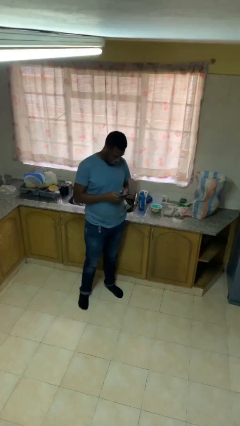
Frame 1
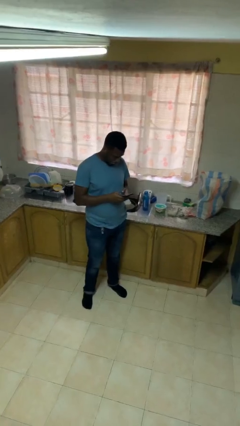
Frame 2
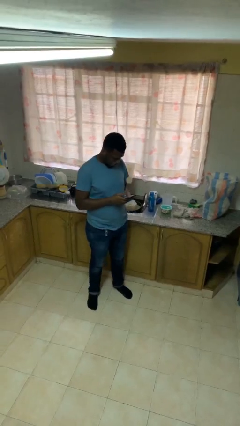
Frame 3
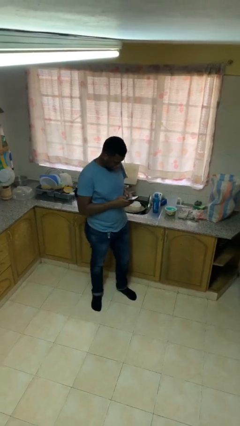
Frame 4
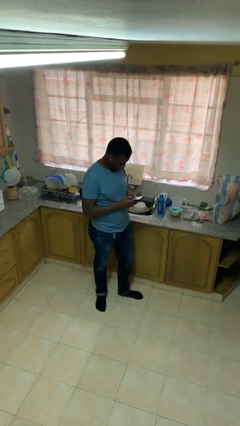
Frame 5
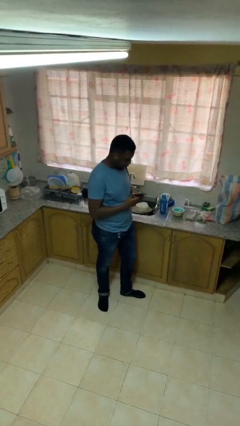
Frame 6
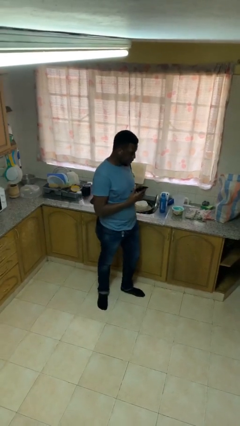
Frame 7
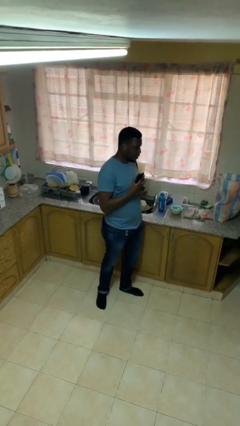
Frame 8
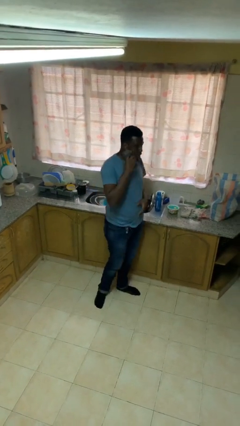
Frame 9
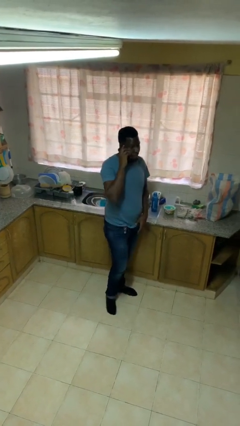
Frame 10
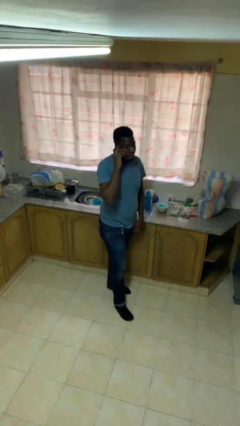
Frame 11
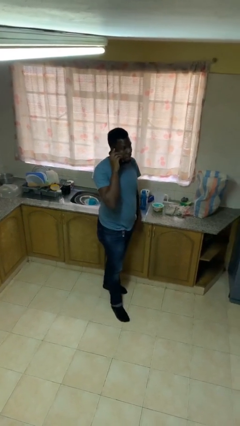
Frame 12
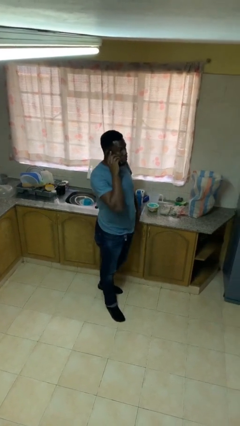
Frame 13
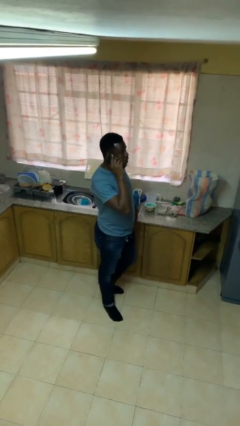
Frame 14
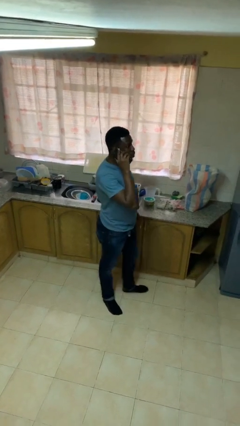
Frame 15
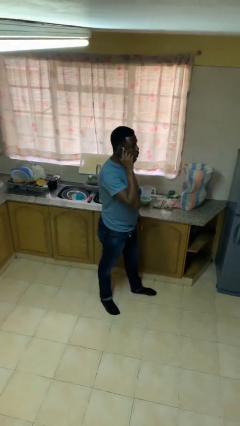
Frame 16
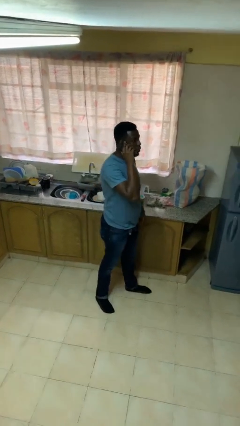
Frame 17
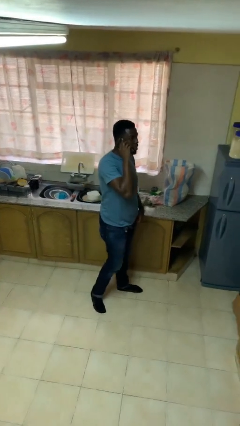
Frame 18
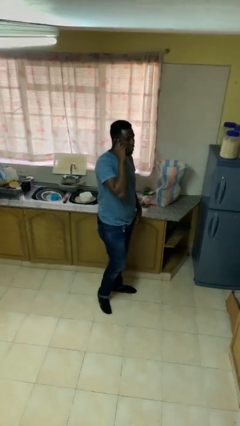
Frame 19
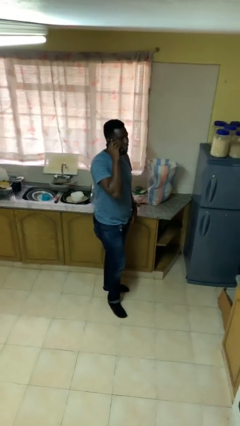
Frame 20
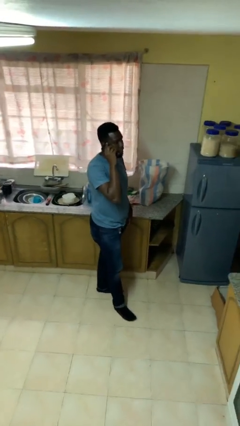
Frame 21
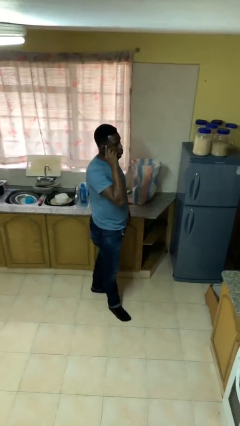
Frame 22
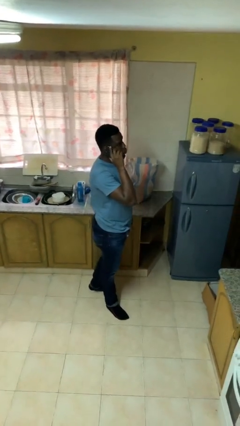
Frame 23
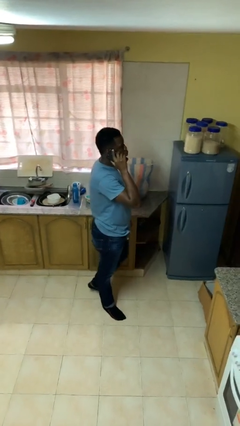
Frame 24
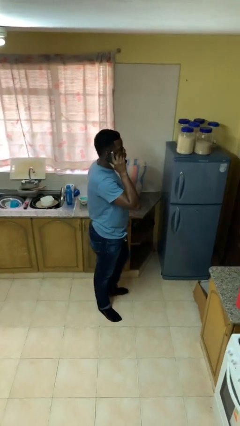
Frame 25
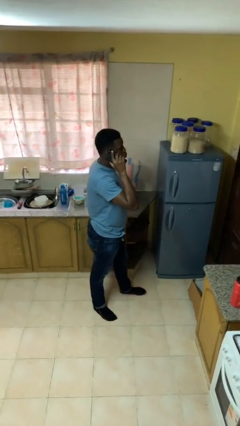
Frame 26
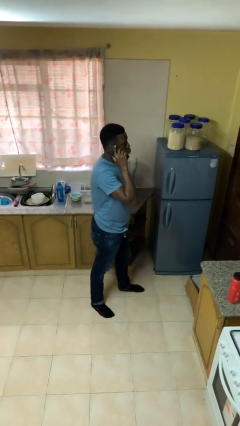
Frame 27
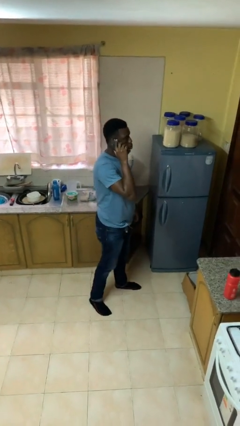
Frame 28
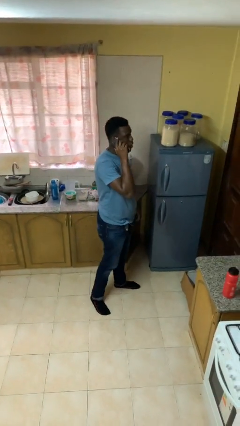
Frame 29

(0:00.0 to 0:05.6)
person talks on phone

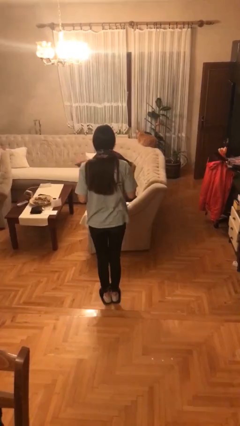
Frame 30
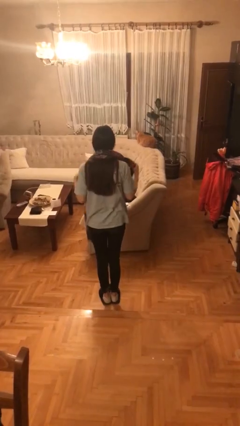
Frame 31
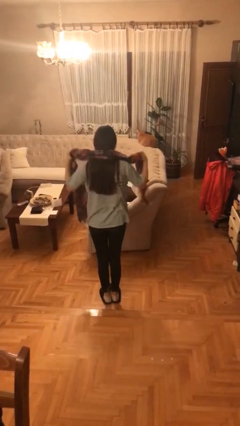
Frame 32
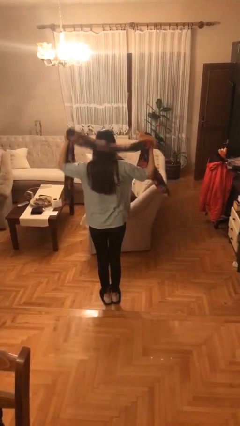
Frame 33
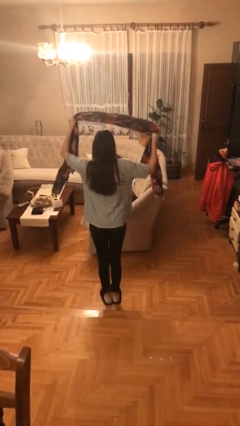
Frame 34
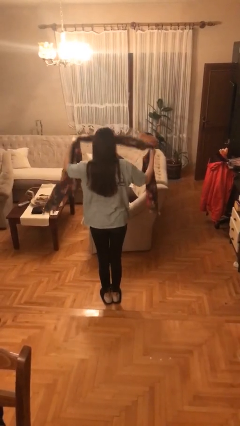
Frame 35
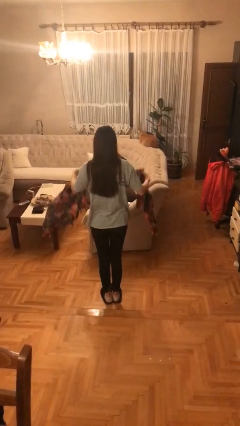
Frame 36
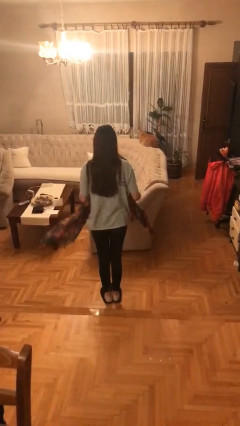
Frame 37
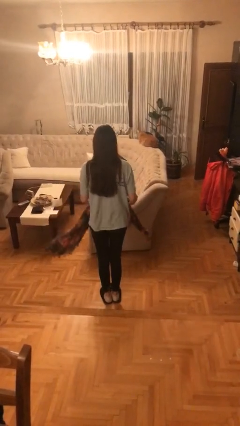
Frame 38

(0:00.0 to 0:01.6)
person takes off scarf

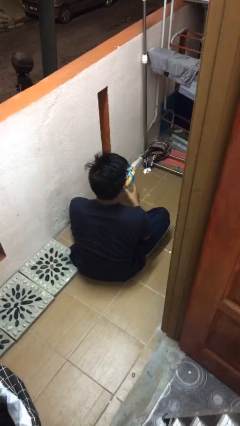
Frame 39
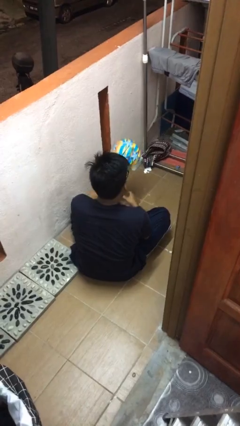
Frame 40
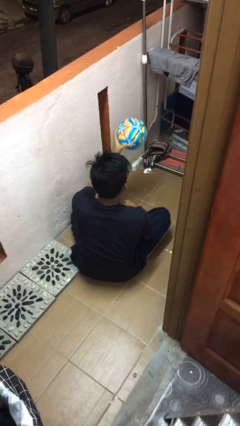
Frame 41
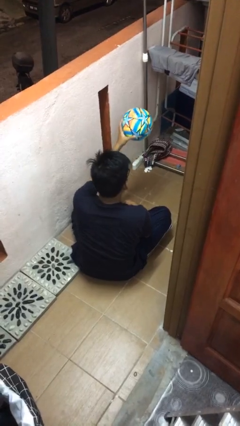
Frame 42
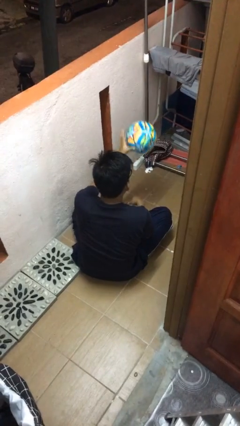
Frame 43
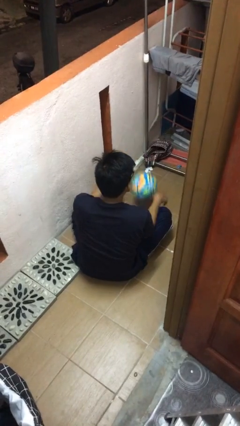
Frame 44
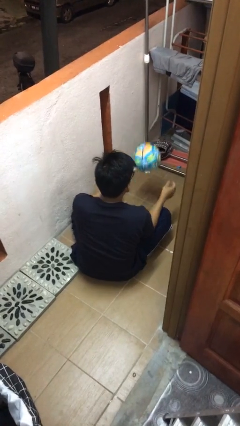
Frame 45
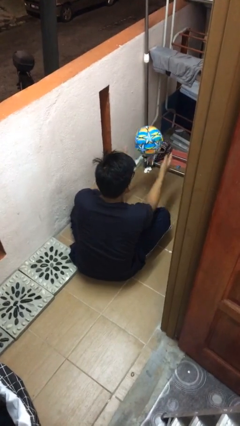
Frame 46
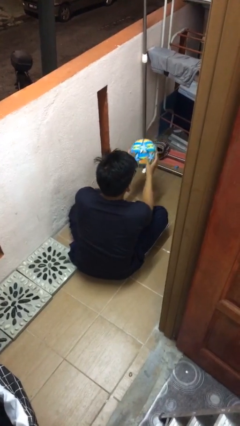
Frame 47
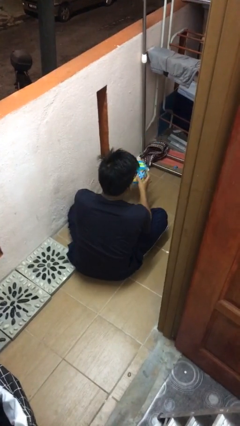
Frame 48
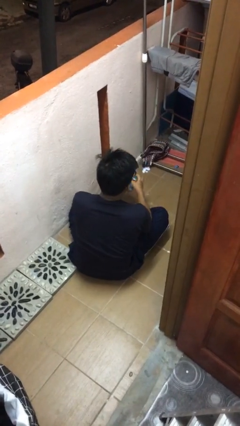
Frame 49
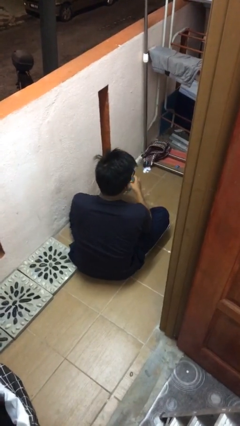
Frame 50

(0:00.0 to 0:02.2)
person bounces ball on floor

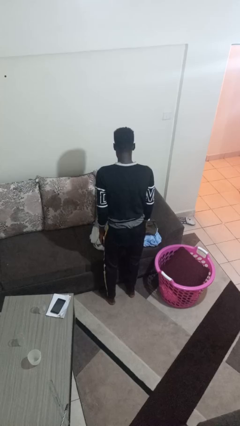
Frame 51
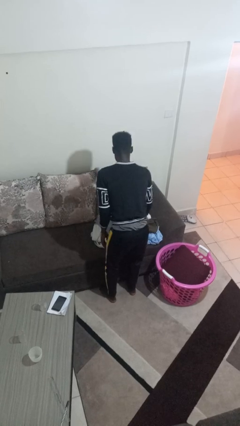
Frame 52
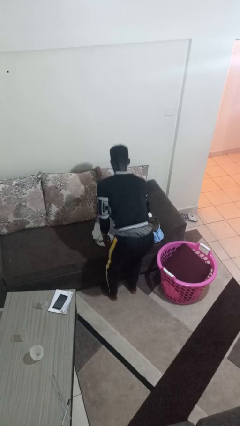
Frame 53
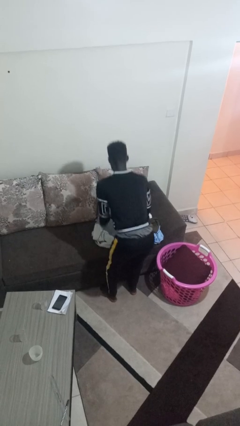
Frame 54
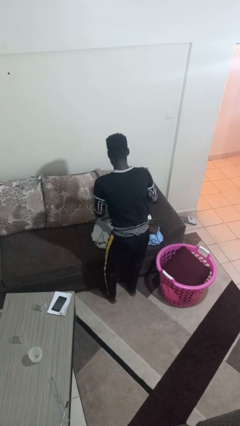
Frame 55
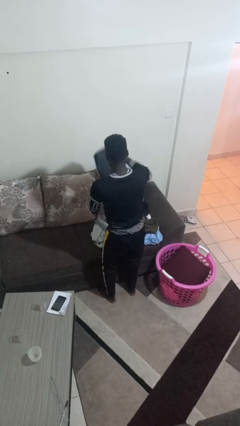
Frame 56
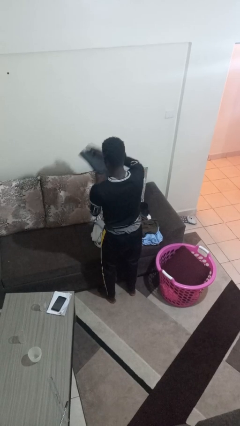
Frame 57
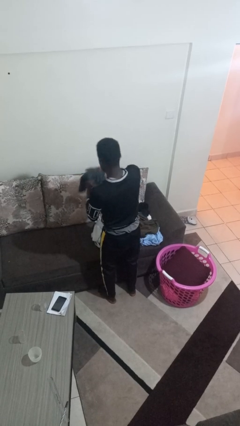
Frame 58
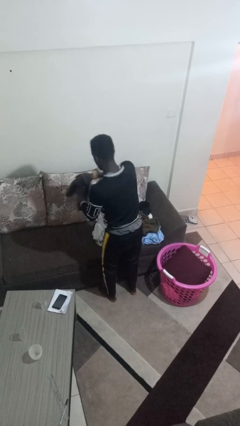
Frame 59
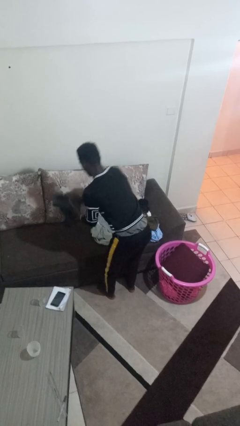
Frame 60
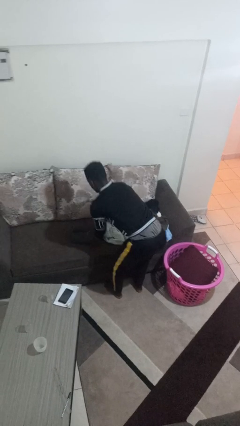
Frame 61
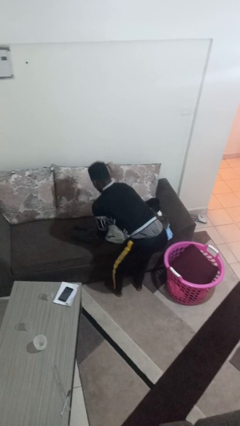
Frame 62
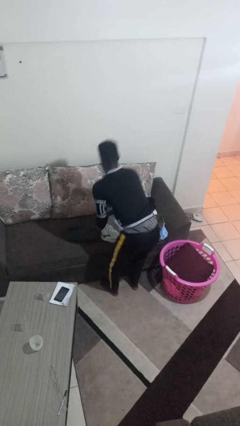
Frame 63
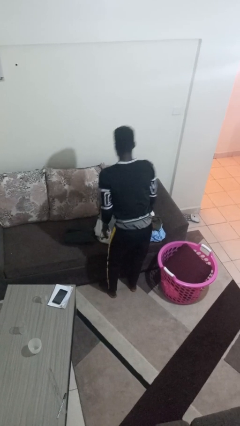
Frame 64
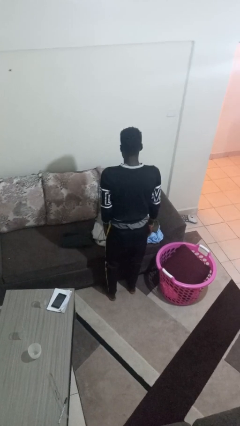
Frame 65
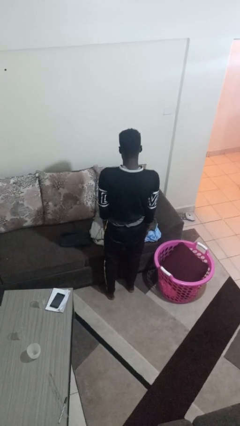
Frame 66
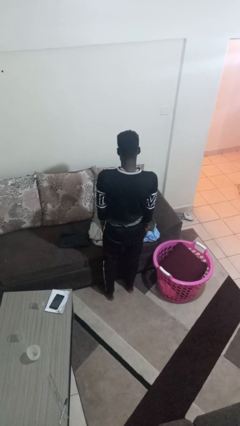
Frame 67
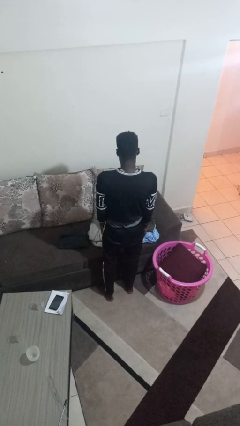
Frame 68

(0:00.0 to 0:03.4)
person folds pants

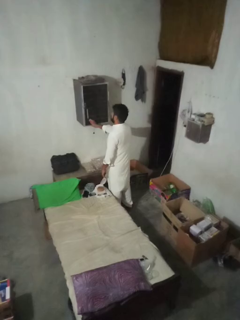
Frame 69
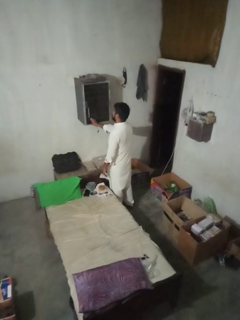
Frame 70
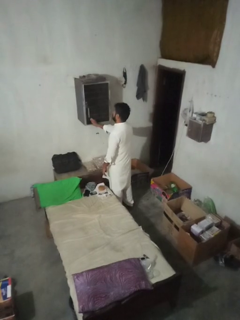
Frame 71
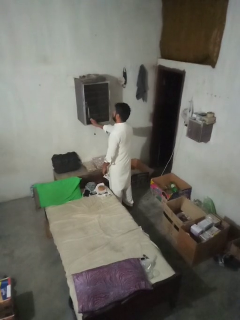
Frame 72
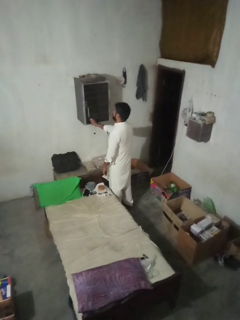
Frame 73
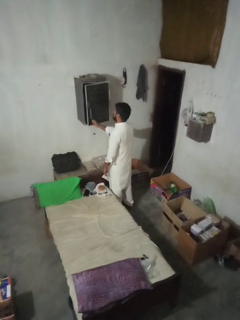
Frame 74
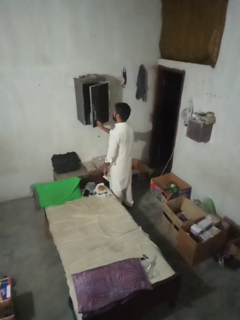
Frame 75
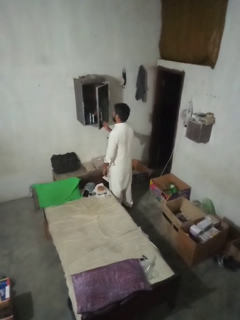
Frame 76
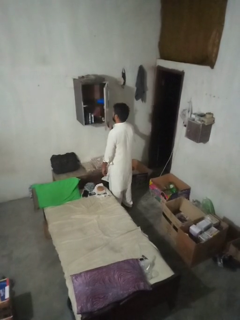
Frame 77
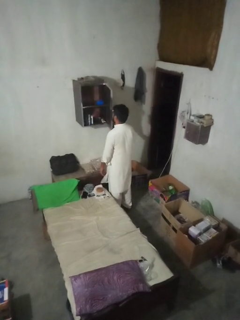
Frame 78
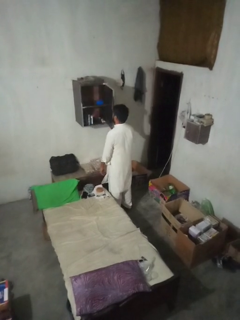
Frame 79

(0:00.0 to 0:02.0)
person opens closet door

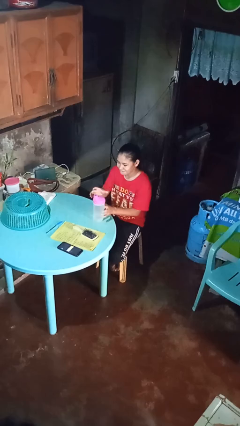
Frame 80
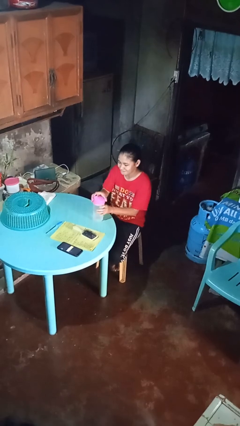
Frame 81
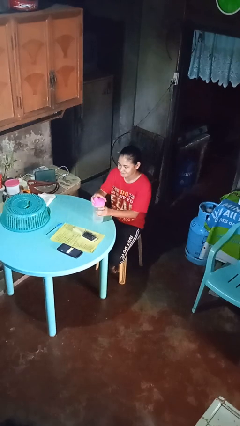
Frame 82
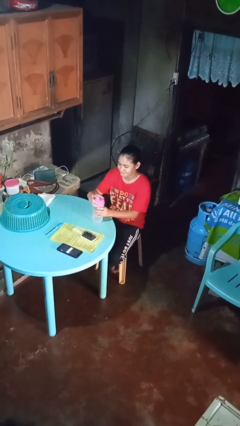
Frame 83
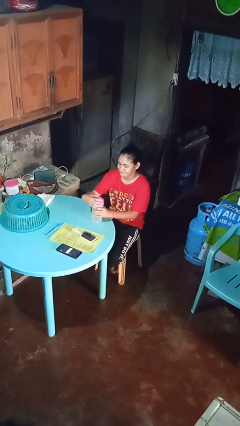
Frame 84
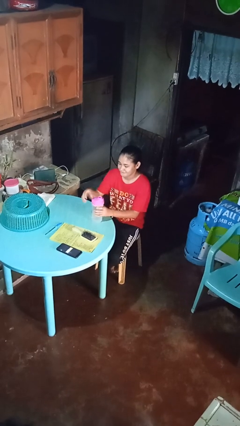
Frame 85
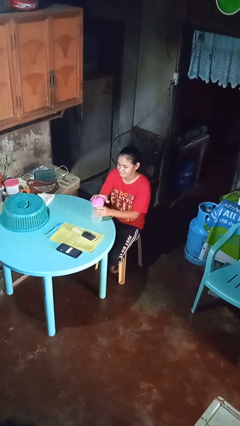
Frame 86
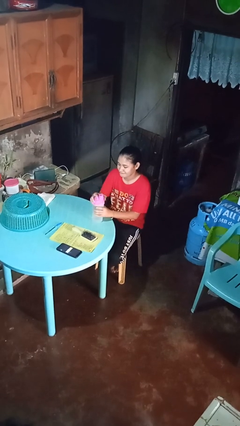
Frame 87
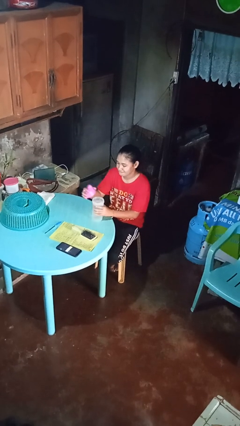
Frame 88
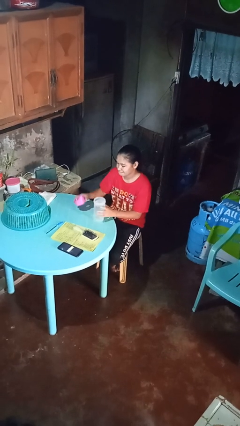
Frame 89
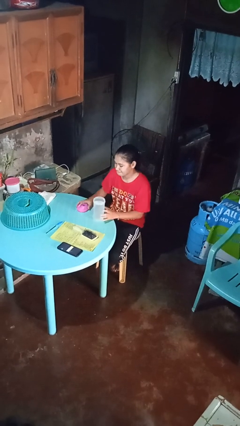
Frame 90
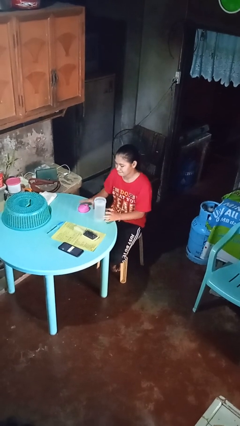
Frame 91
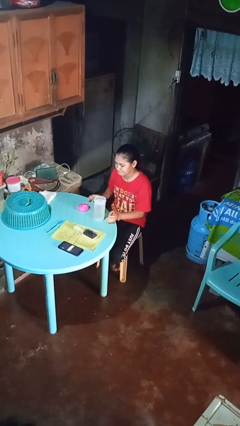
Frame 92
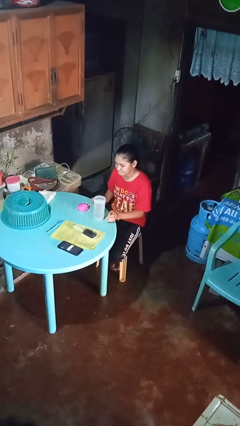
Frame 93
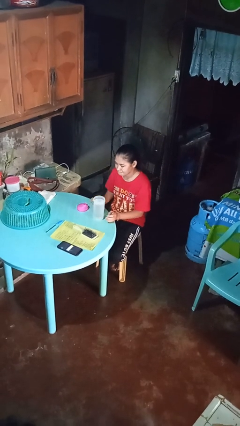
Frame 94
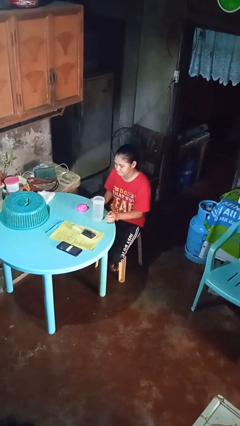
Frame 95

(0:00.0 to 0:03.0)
person unscrews lid from bottle
